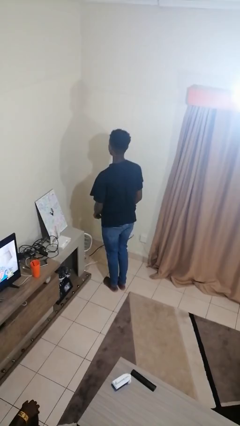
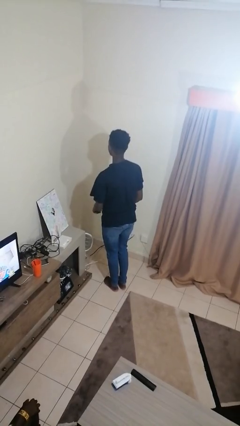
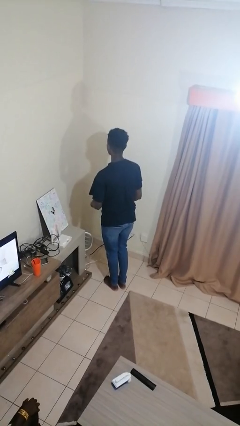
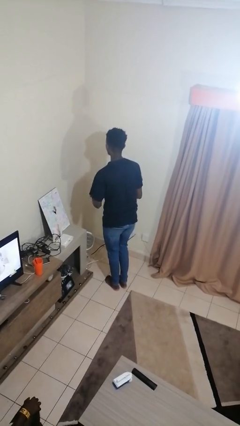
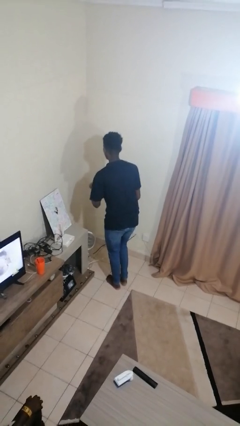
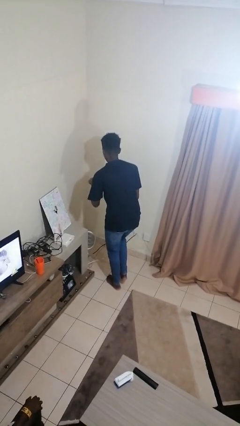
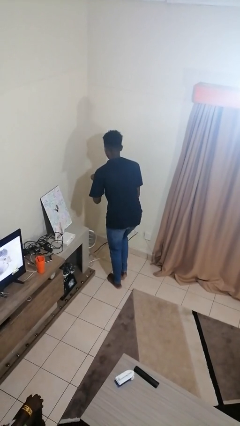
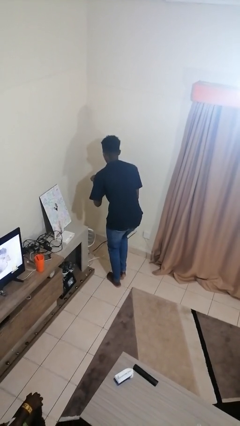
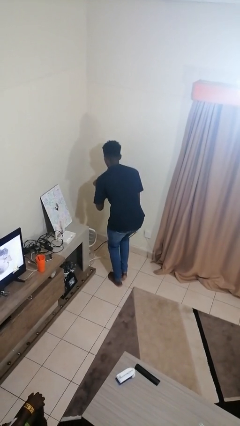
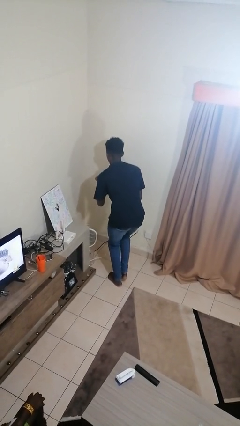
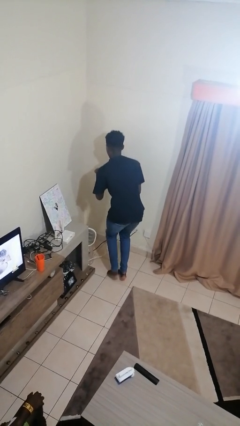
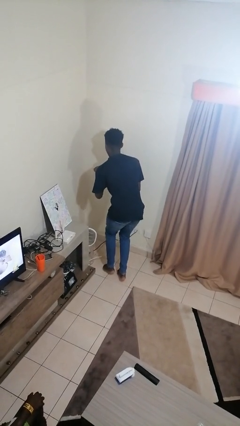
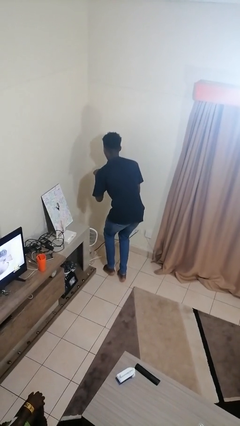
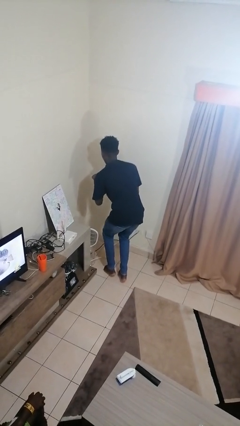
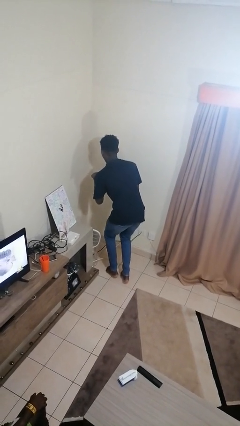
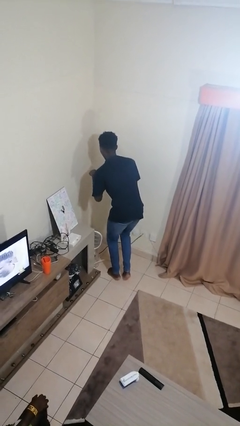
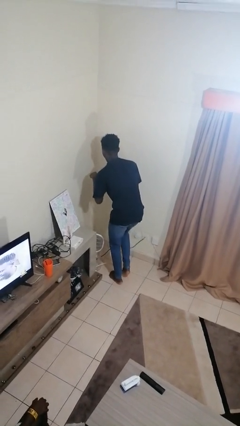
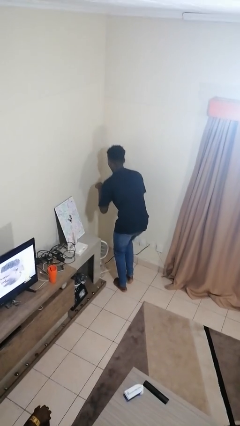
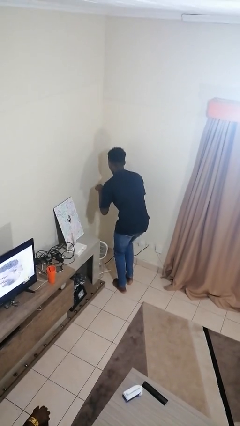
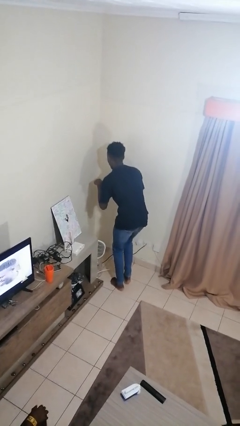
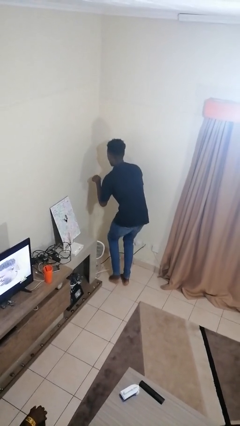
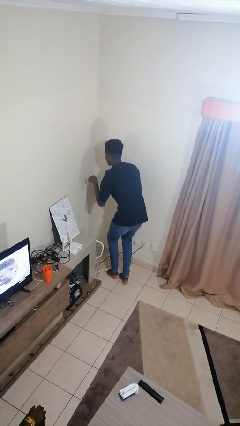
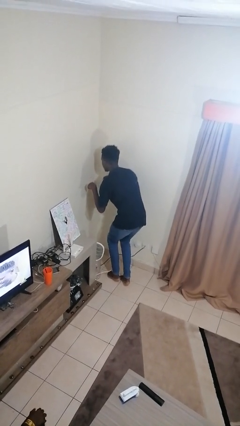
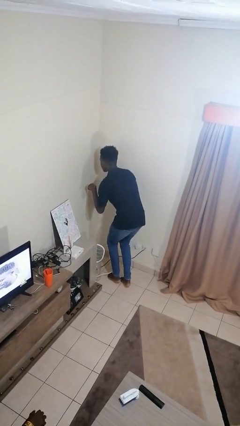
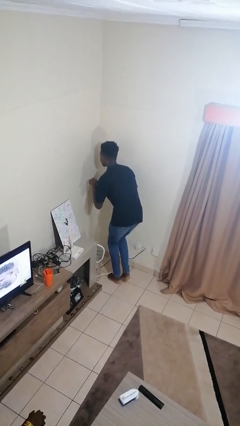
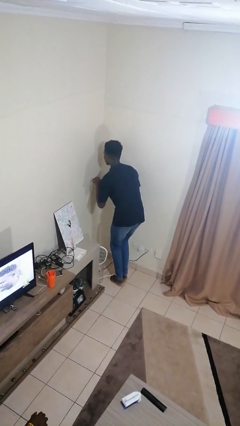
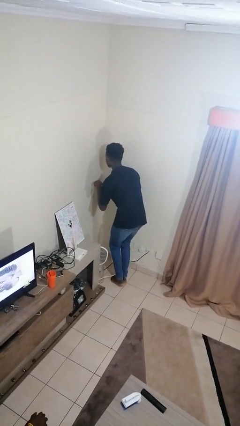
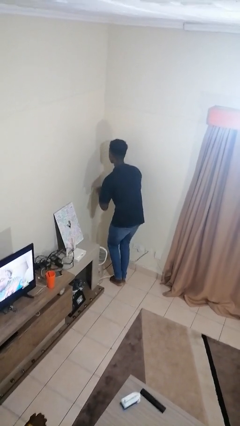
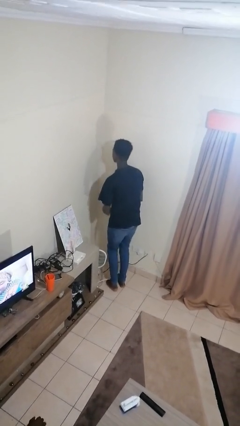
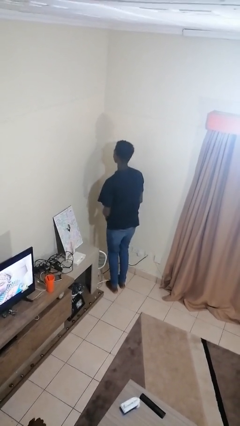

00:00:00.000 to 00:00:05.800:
person walks tiptoe

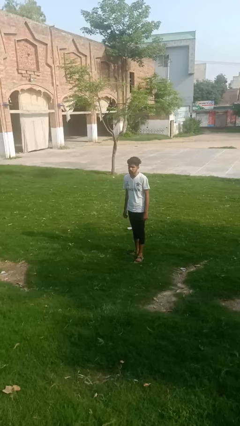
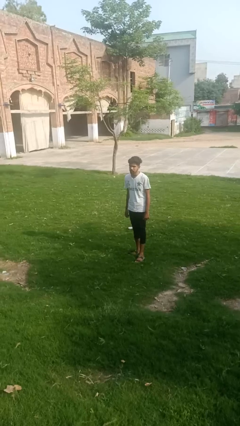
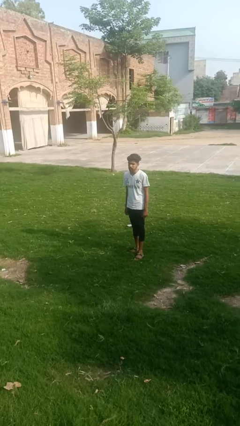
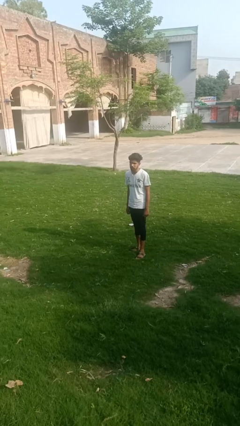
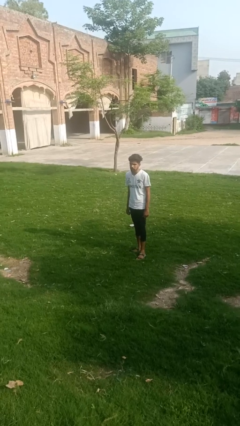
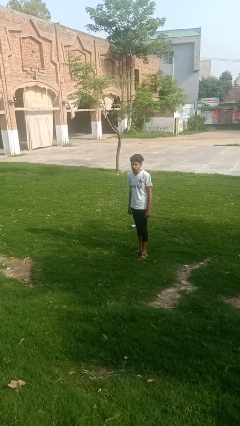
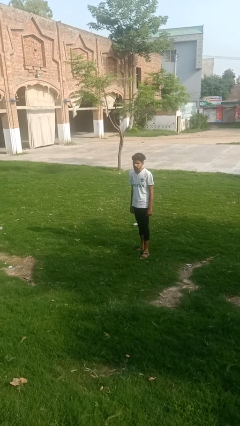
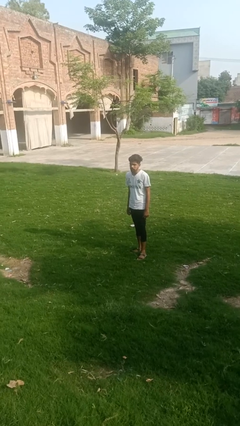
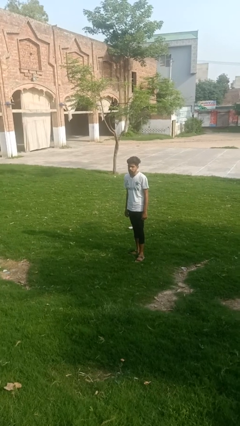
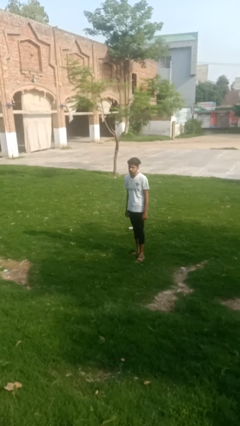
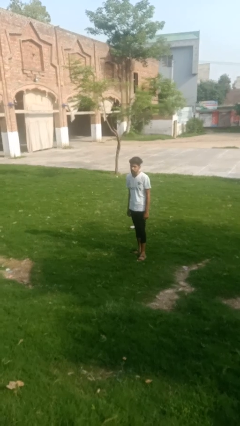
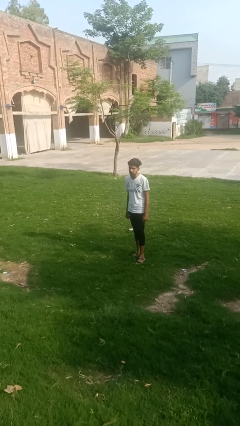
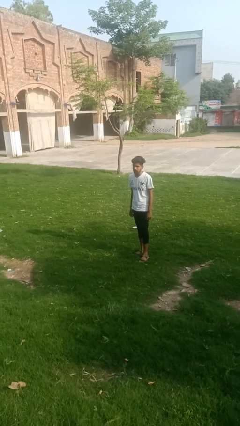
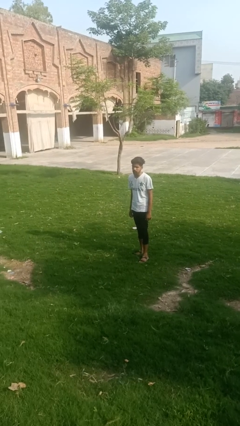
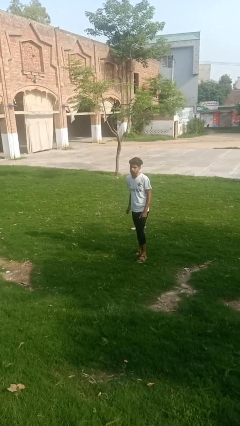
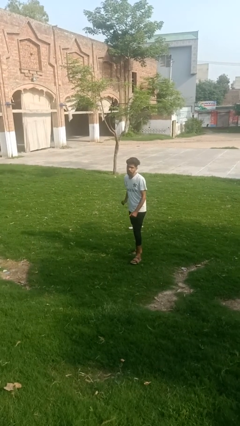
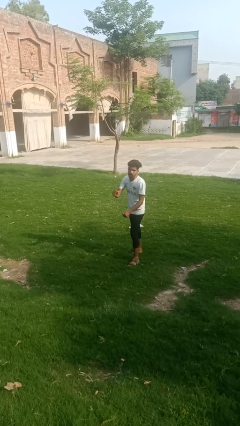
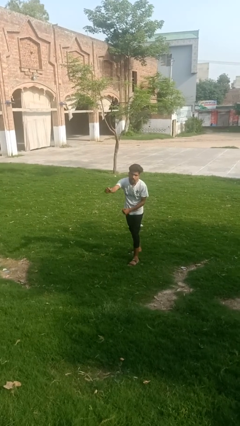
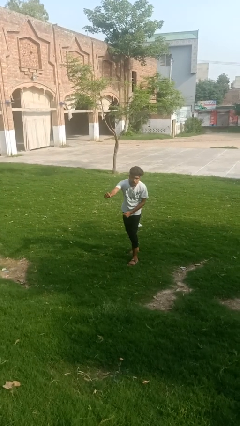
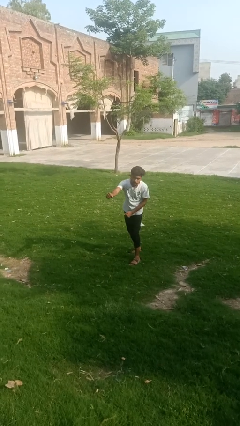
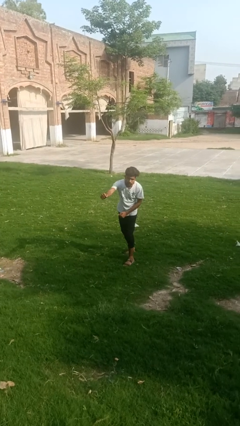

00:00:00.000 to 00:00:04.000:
person punches

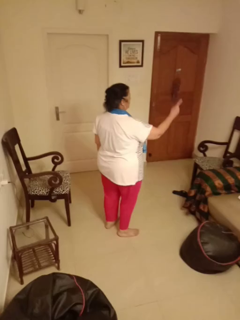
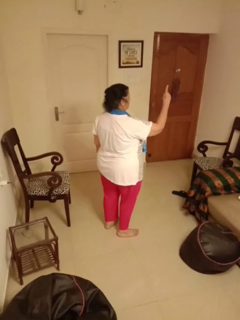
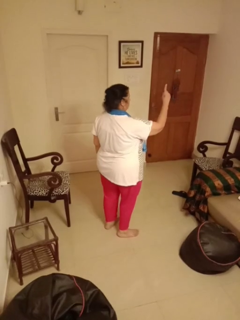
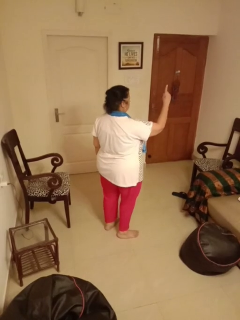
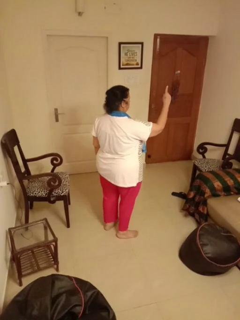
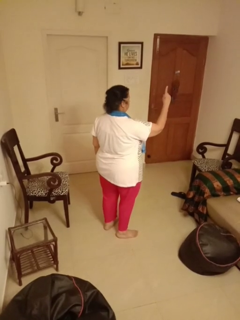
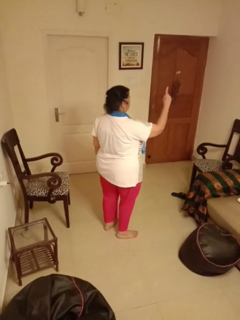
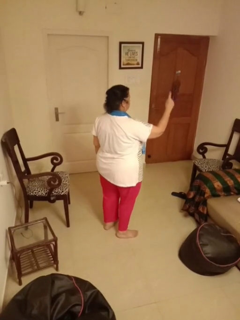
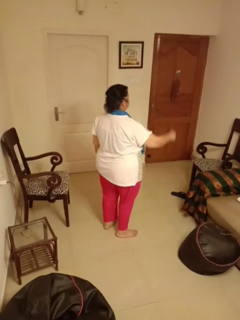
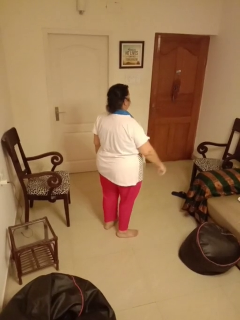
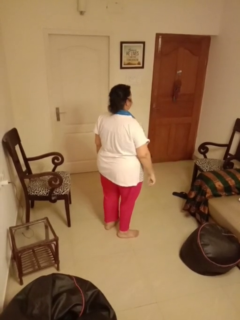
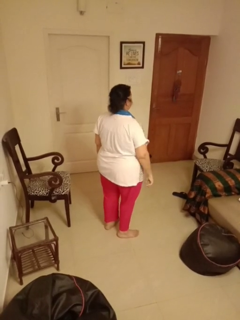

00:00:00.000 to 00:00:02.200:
person gestures number one

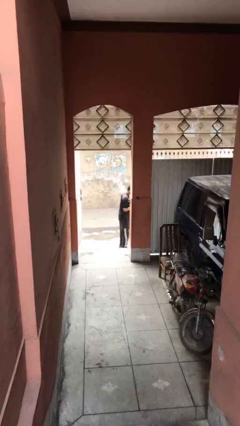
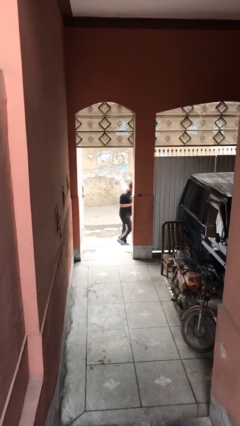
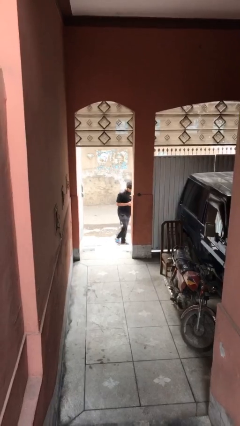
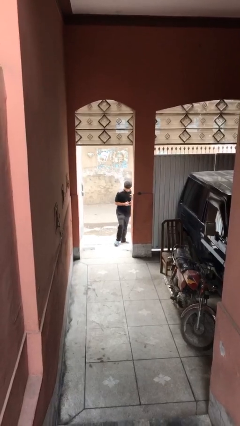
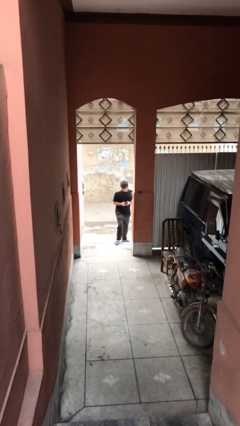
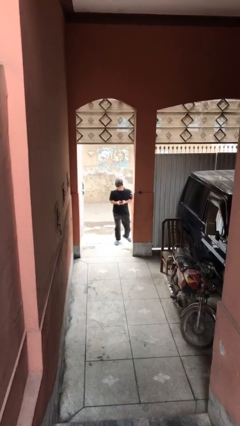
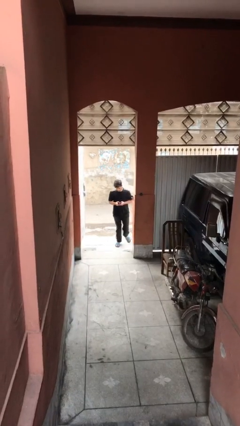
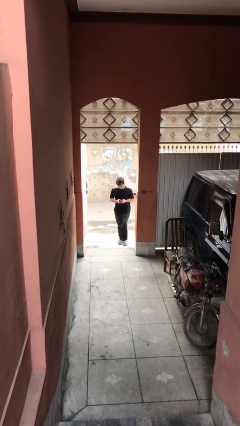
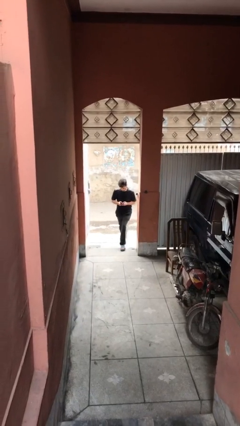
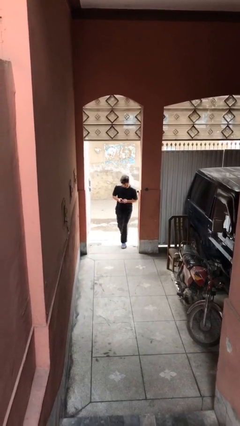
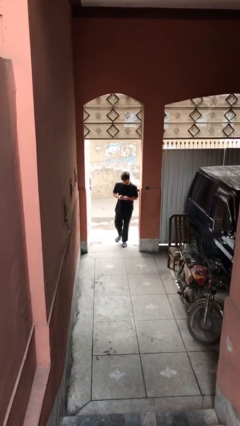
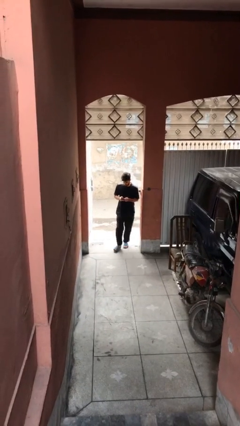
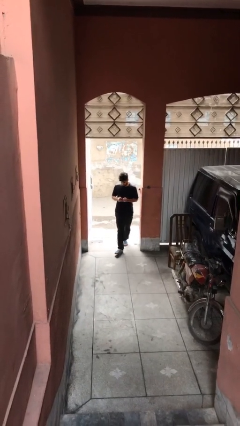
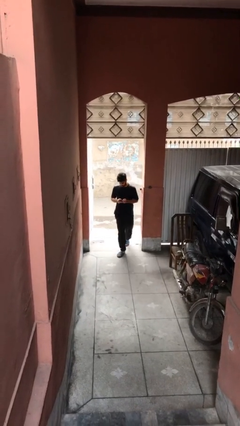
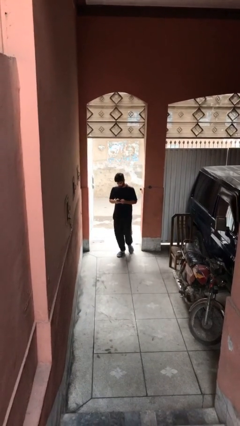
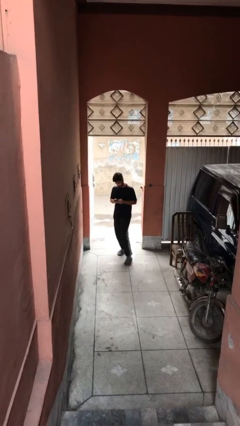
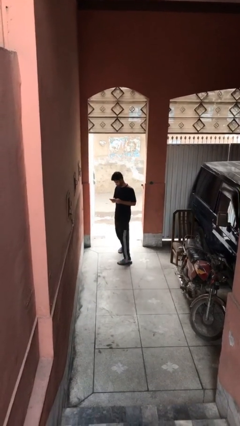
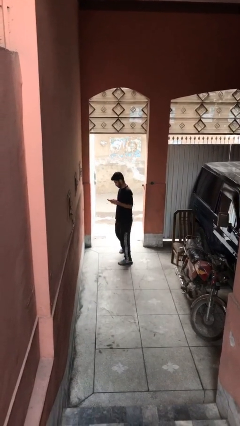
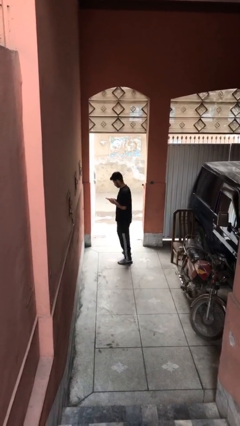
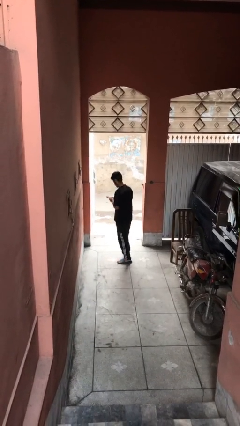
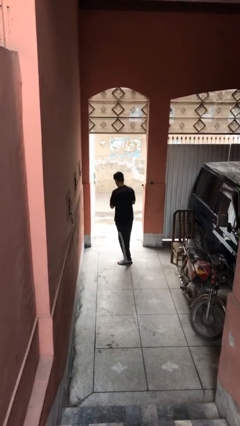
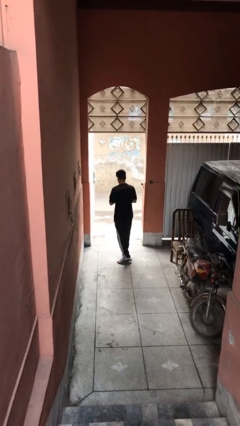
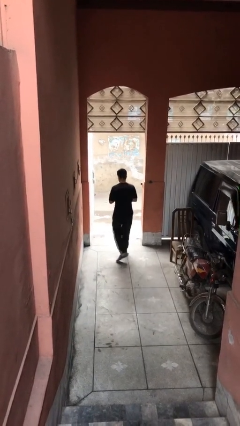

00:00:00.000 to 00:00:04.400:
person enters scene through structure

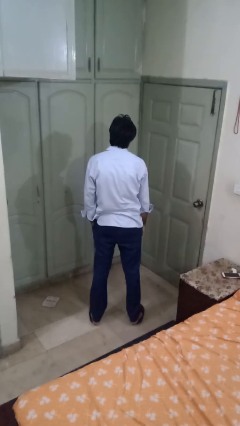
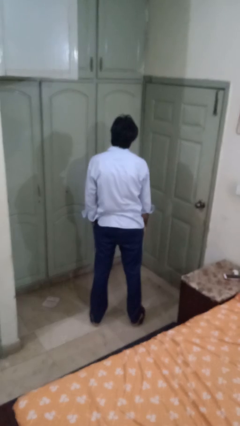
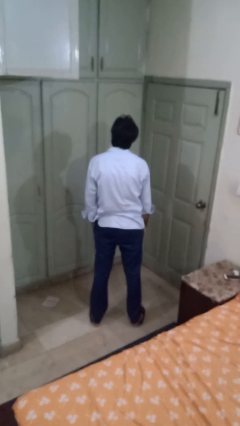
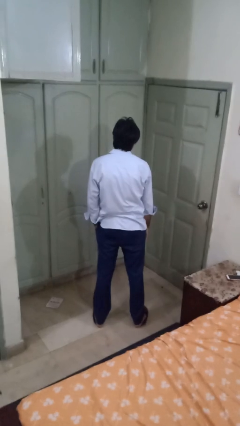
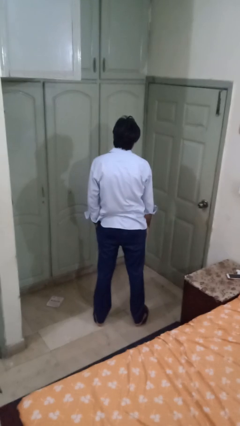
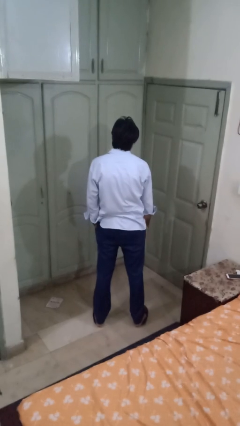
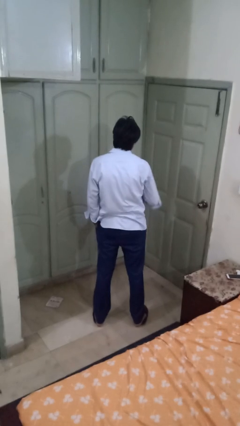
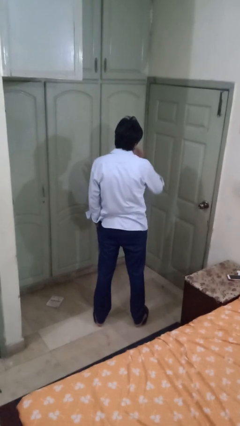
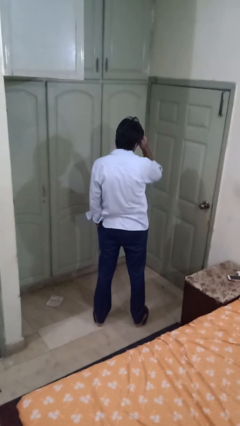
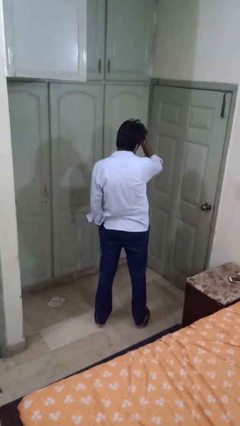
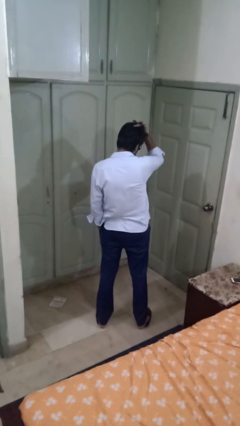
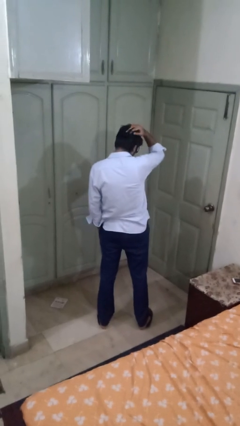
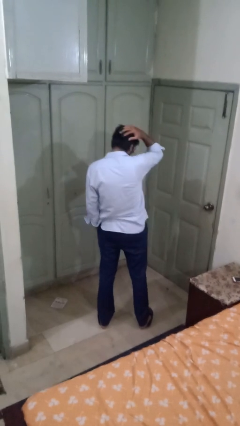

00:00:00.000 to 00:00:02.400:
person strokes hair
